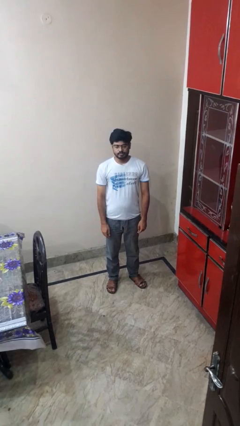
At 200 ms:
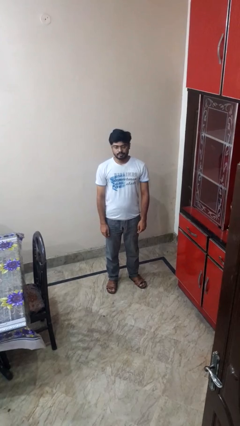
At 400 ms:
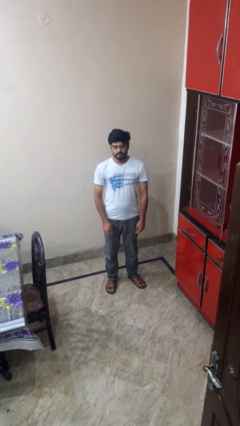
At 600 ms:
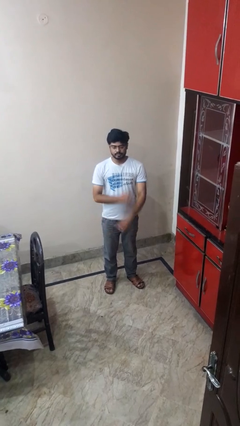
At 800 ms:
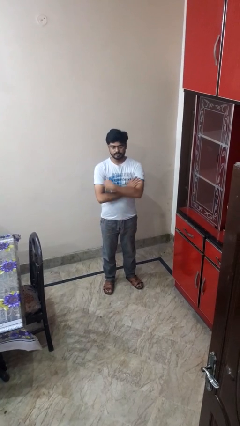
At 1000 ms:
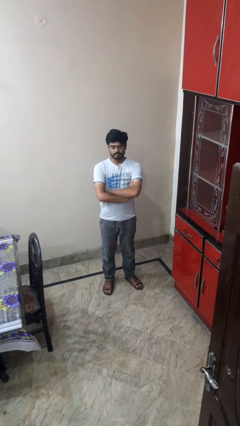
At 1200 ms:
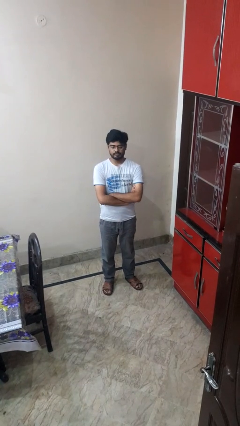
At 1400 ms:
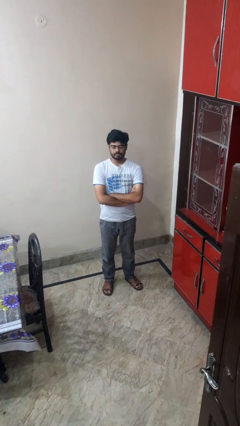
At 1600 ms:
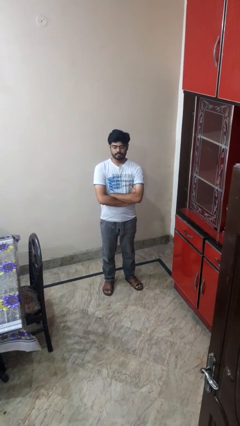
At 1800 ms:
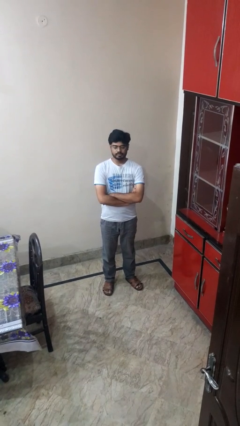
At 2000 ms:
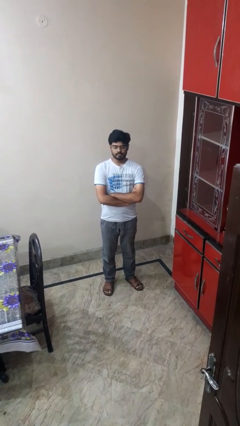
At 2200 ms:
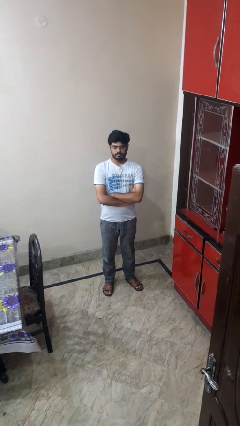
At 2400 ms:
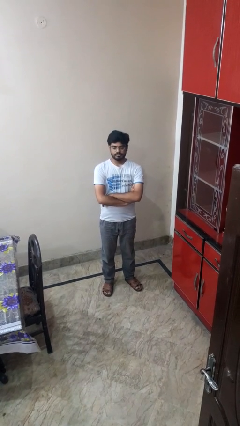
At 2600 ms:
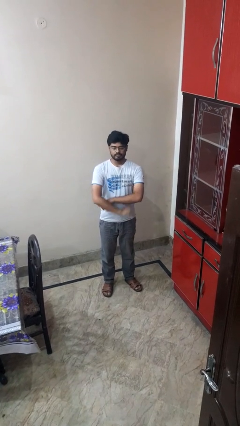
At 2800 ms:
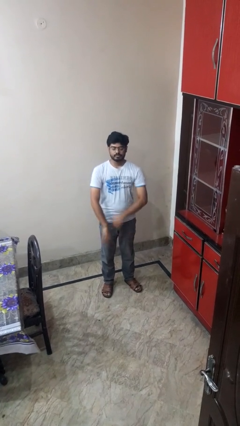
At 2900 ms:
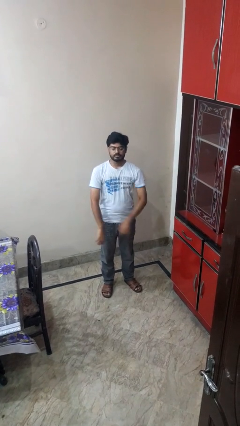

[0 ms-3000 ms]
person crosses arms

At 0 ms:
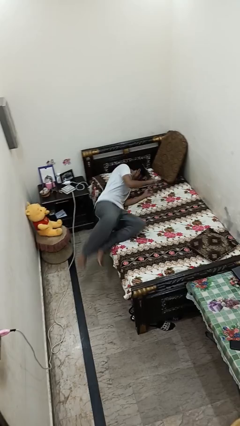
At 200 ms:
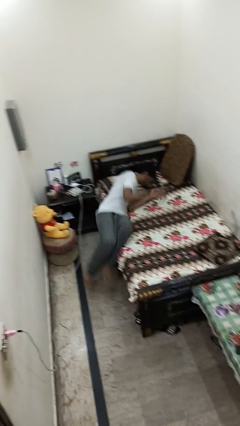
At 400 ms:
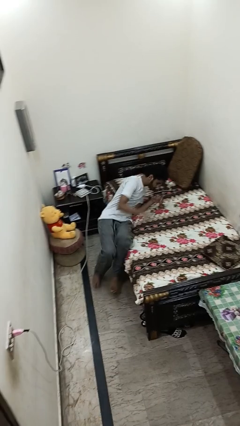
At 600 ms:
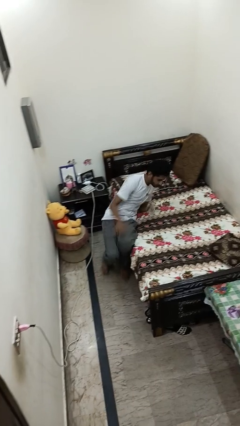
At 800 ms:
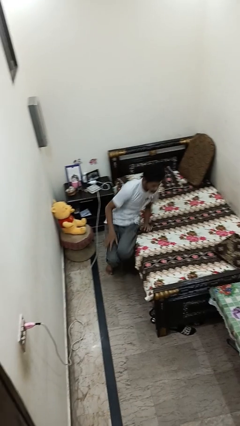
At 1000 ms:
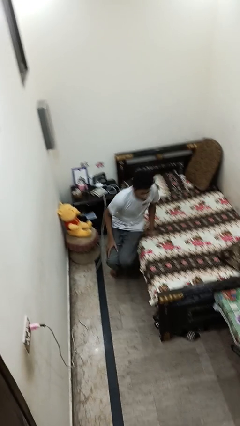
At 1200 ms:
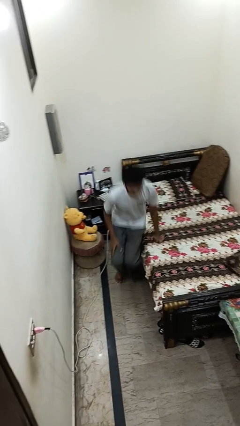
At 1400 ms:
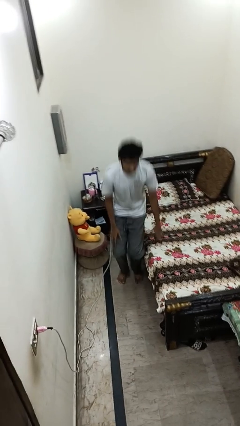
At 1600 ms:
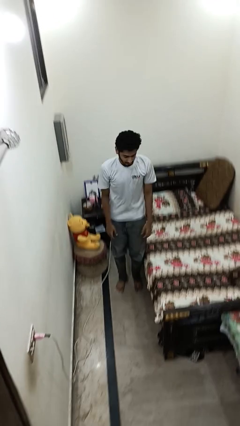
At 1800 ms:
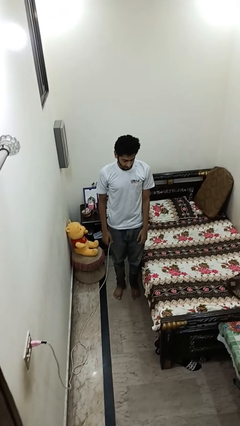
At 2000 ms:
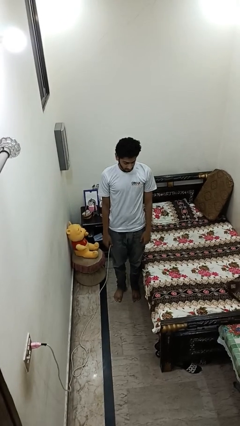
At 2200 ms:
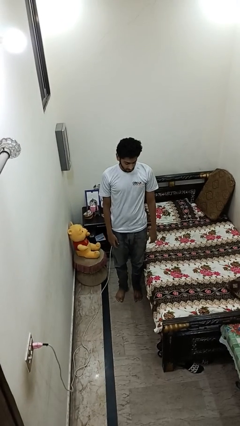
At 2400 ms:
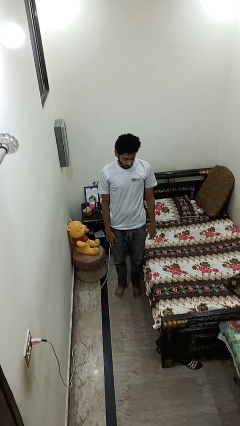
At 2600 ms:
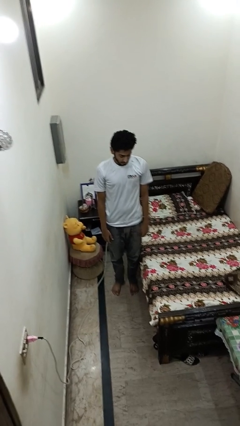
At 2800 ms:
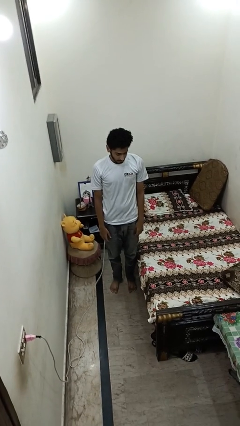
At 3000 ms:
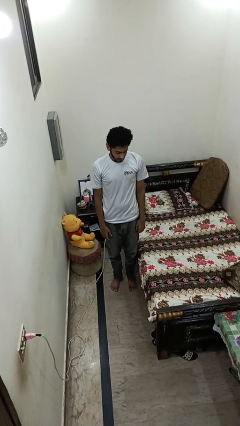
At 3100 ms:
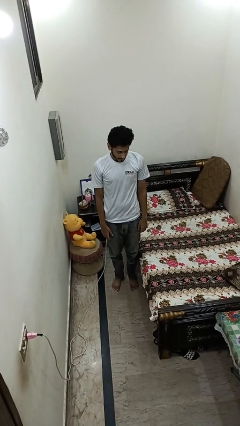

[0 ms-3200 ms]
person stands up

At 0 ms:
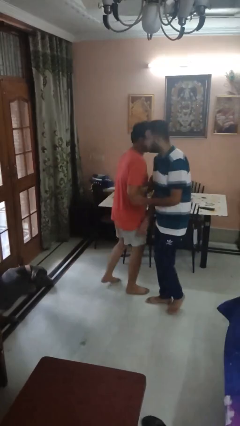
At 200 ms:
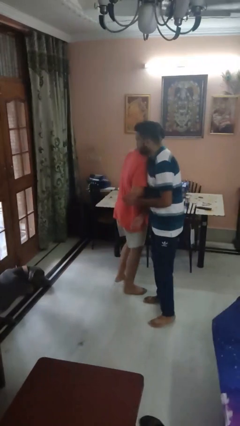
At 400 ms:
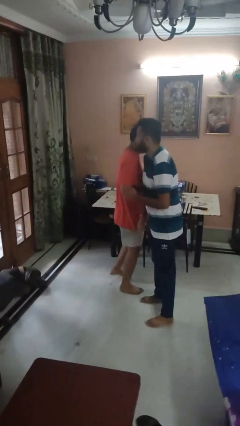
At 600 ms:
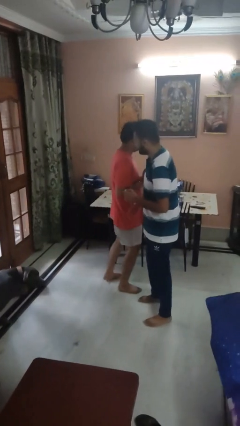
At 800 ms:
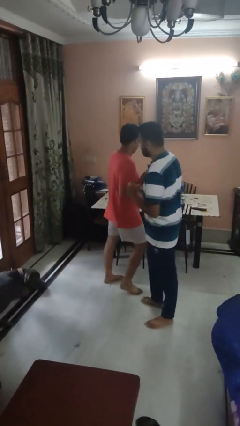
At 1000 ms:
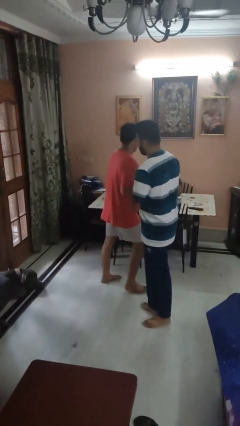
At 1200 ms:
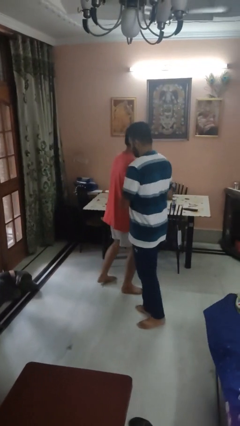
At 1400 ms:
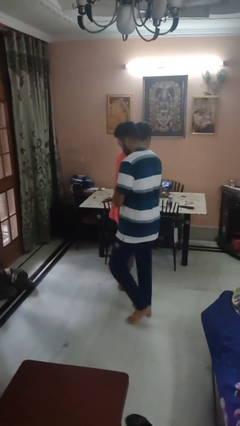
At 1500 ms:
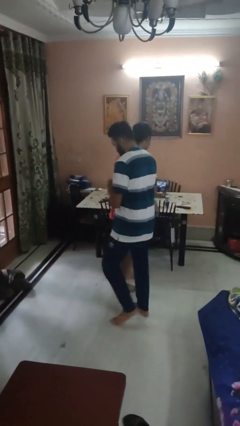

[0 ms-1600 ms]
person bumps into person

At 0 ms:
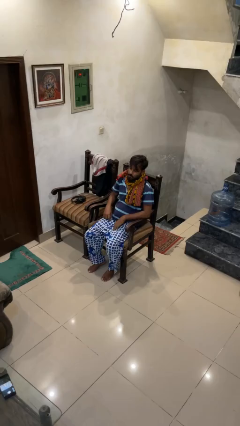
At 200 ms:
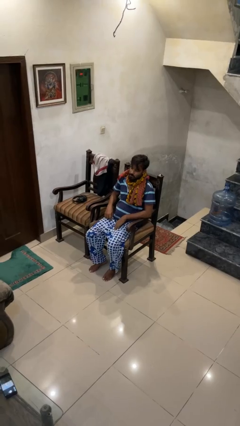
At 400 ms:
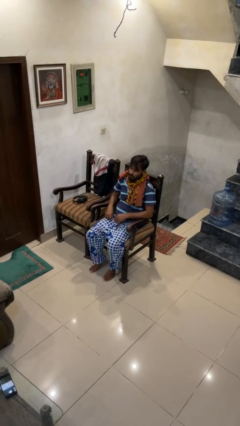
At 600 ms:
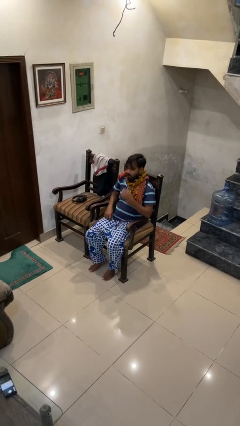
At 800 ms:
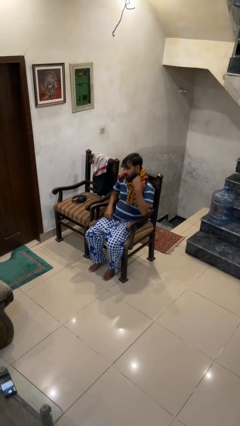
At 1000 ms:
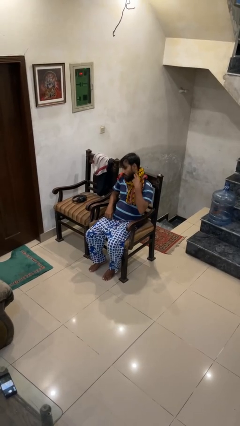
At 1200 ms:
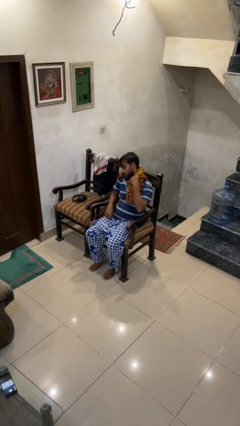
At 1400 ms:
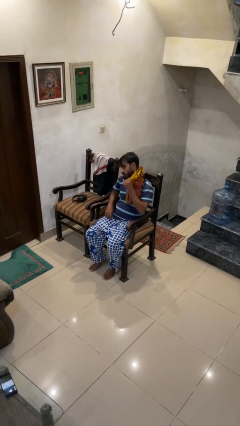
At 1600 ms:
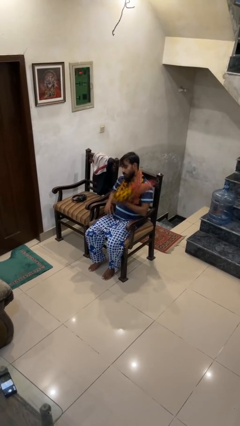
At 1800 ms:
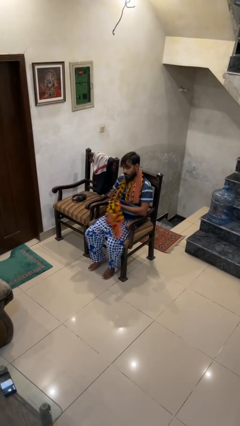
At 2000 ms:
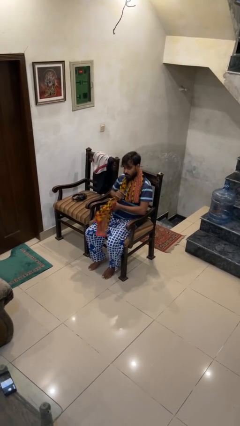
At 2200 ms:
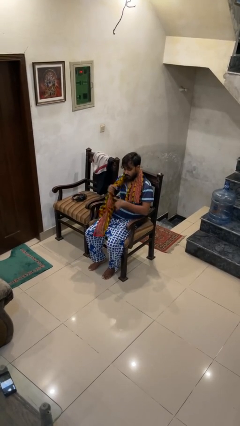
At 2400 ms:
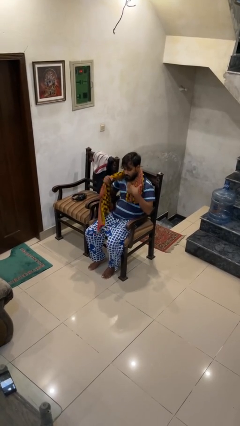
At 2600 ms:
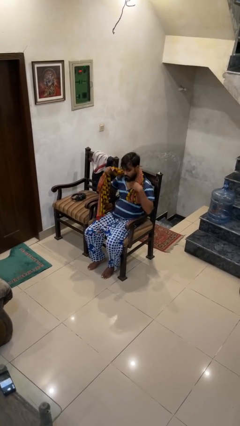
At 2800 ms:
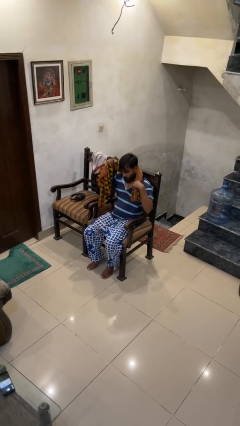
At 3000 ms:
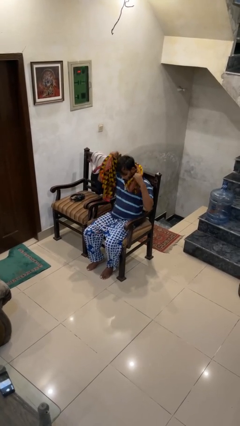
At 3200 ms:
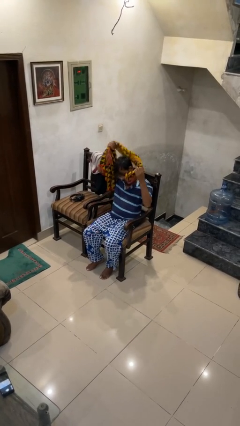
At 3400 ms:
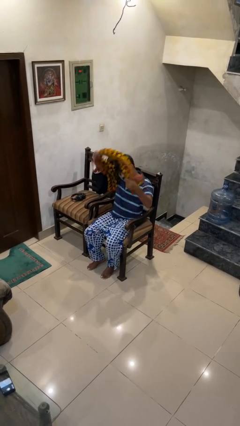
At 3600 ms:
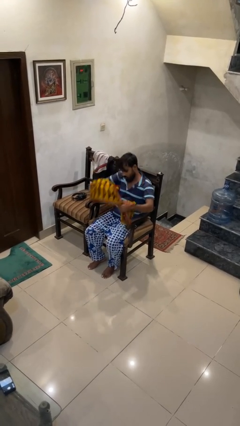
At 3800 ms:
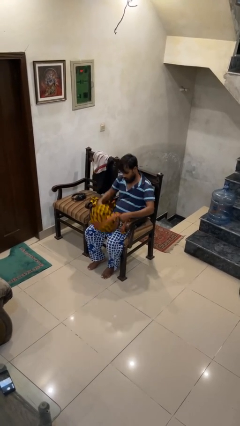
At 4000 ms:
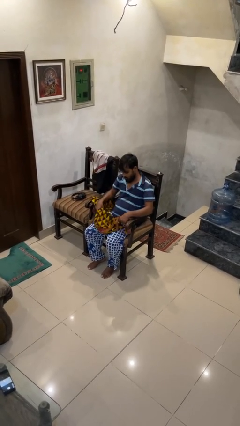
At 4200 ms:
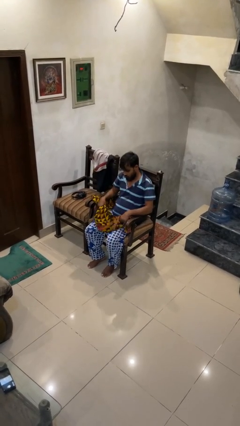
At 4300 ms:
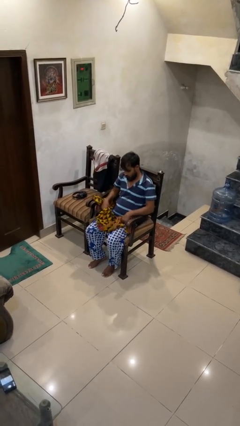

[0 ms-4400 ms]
person takes off scarf

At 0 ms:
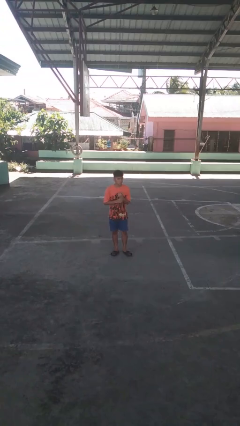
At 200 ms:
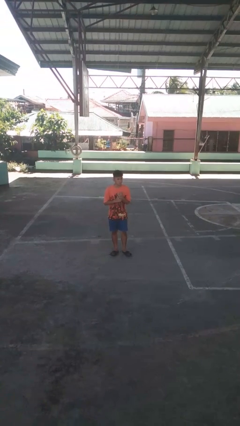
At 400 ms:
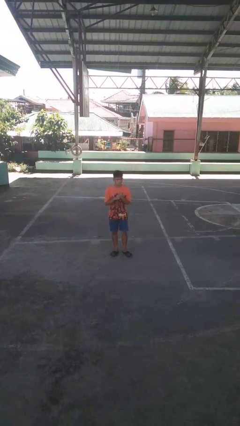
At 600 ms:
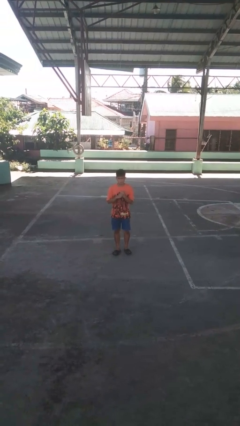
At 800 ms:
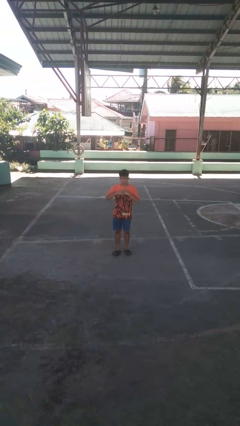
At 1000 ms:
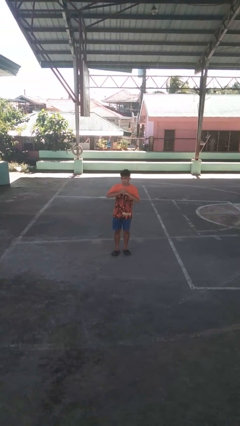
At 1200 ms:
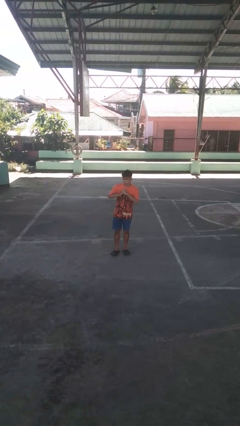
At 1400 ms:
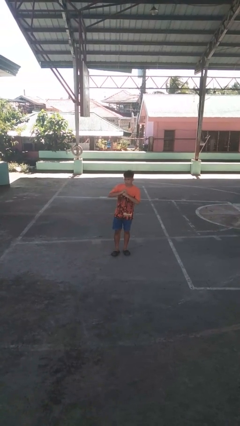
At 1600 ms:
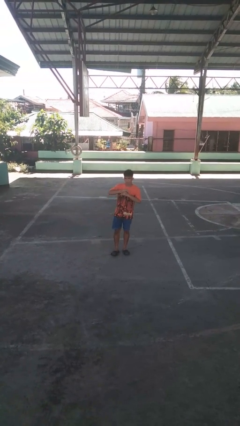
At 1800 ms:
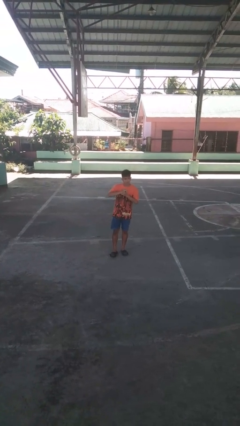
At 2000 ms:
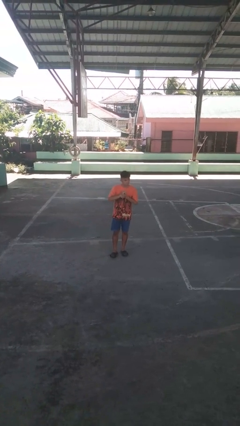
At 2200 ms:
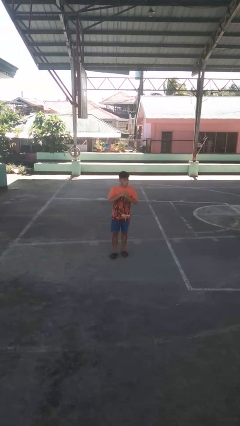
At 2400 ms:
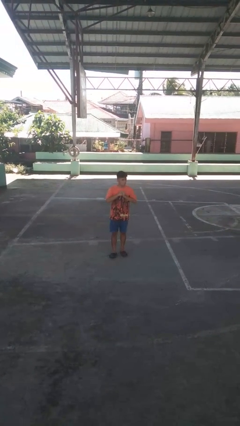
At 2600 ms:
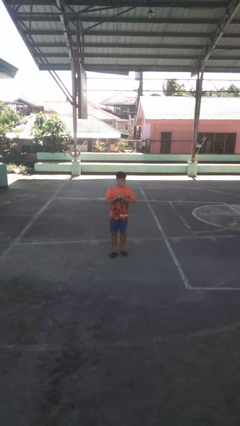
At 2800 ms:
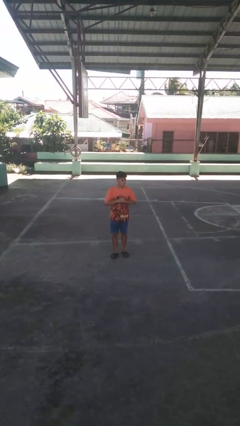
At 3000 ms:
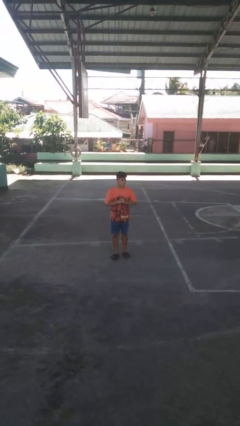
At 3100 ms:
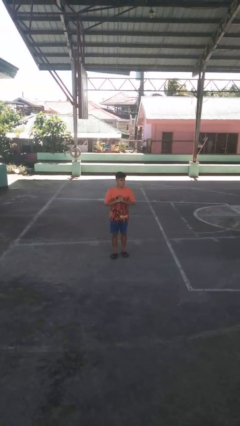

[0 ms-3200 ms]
person cracks knuckles

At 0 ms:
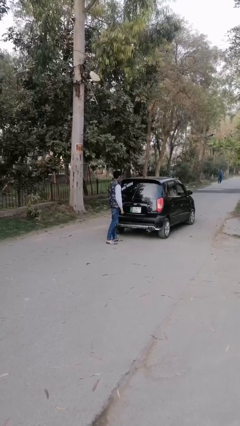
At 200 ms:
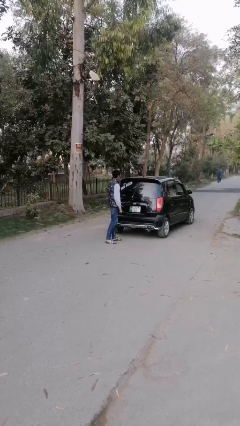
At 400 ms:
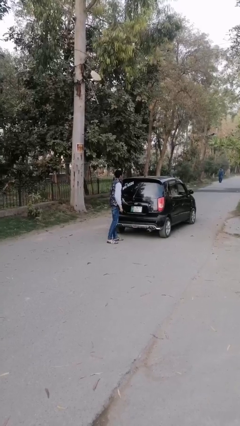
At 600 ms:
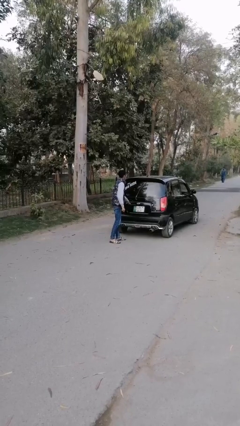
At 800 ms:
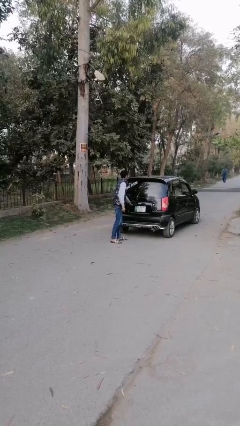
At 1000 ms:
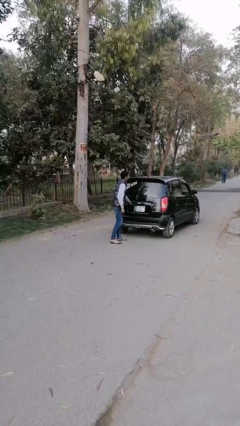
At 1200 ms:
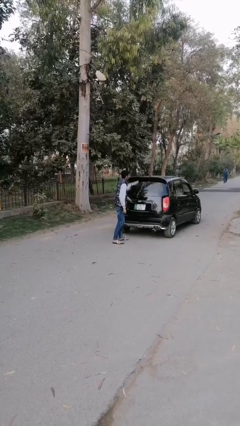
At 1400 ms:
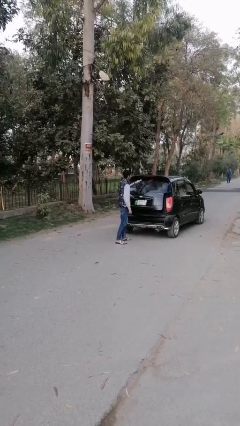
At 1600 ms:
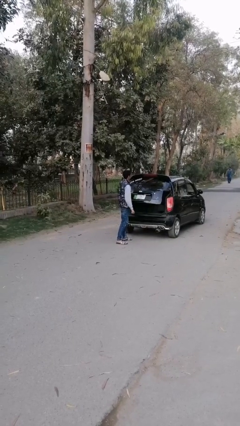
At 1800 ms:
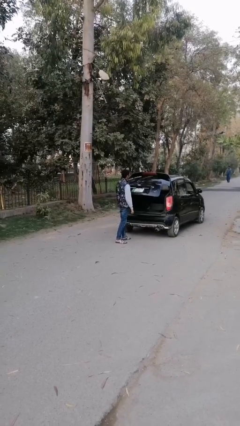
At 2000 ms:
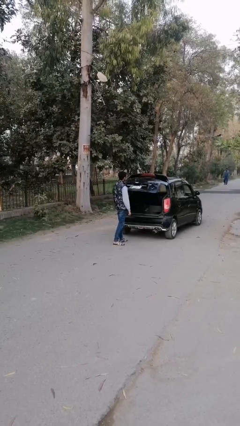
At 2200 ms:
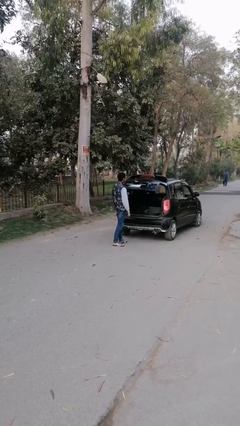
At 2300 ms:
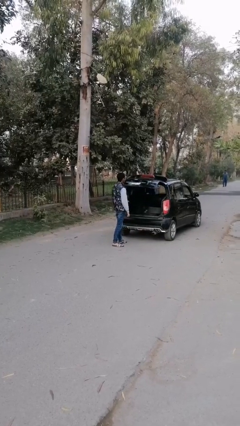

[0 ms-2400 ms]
person closes car trunk
